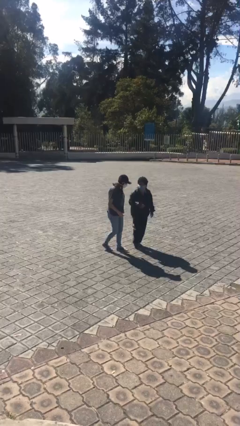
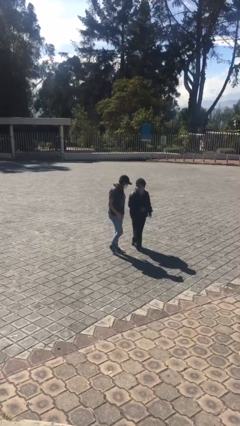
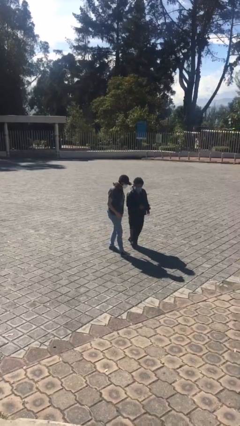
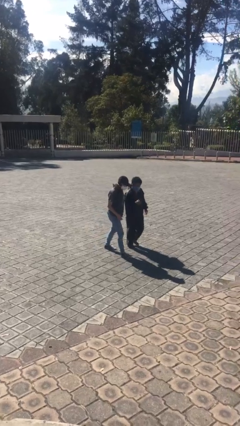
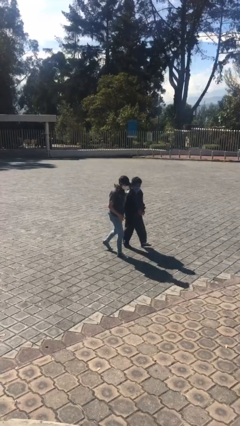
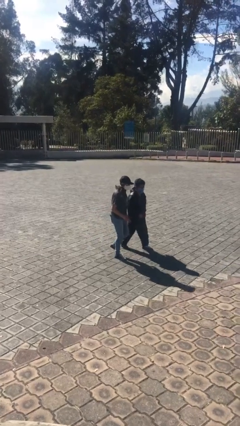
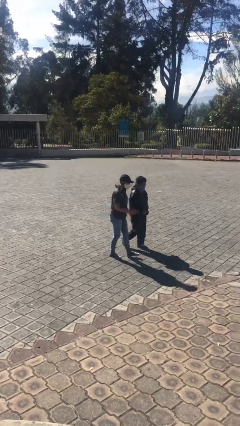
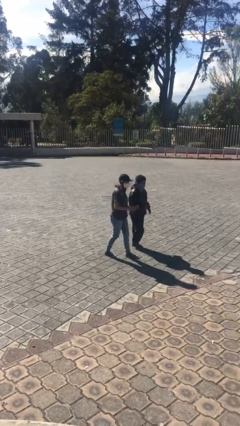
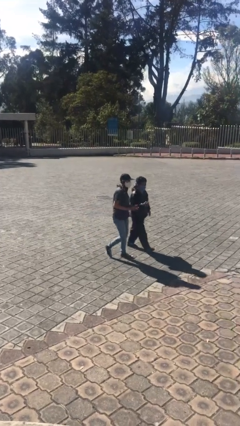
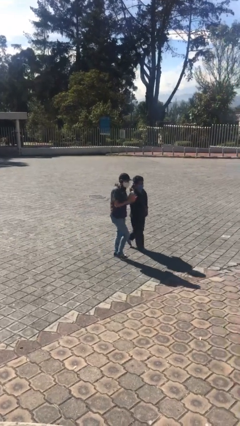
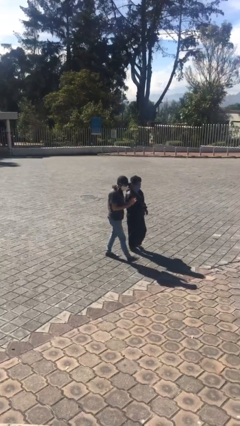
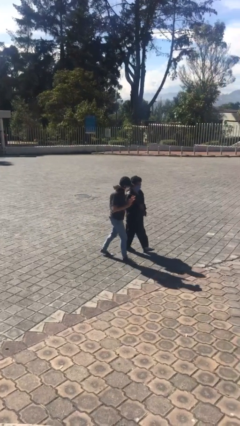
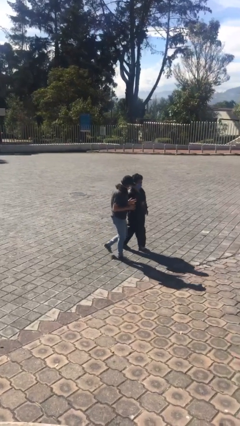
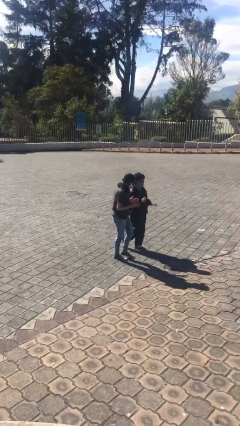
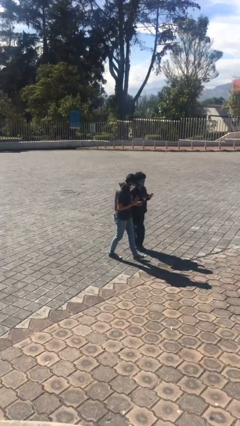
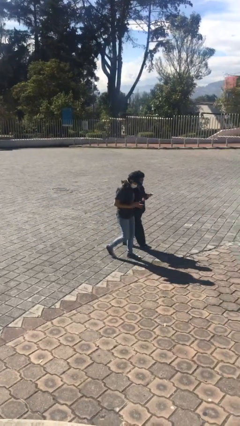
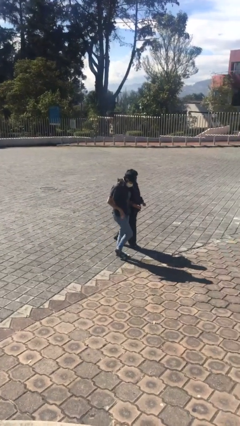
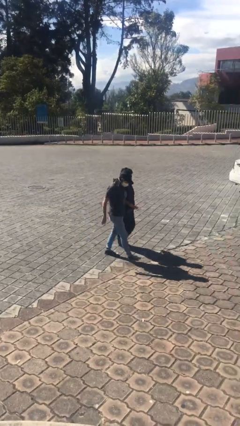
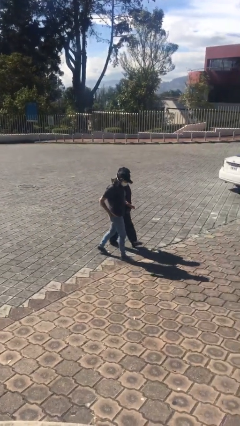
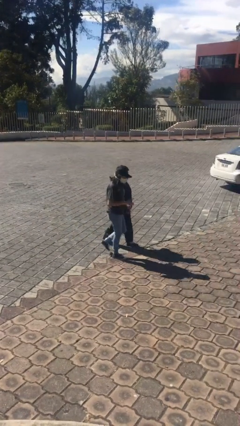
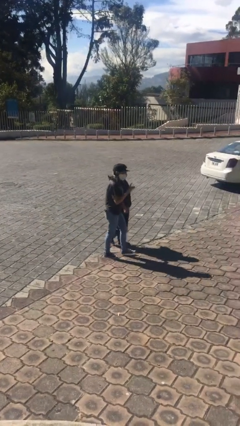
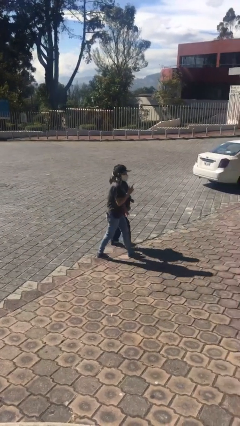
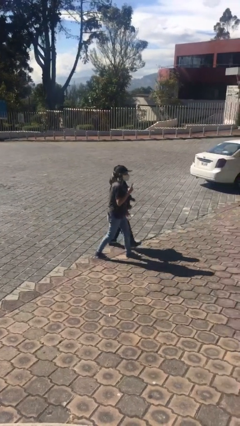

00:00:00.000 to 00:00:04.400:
person talks to person

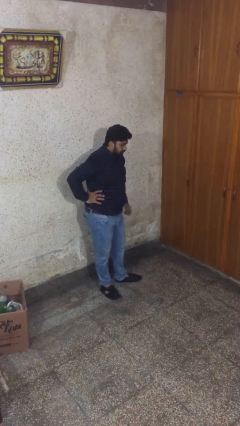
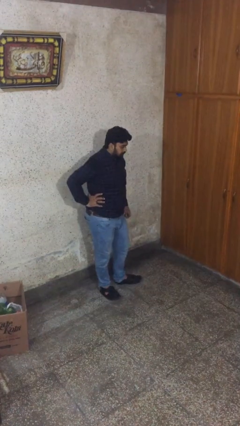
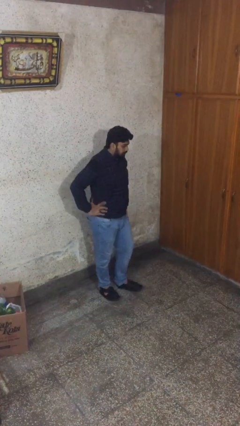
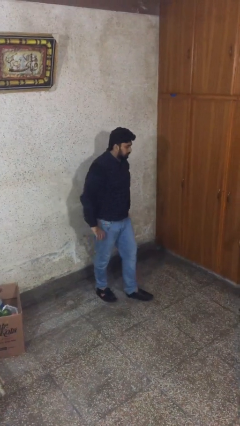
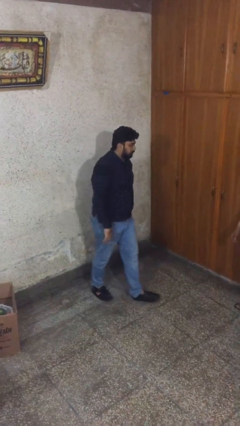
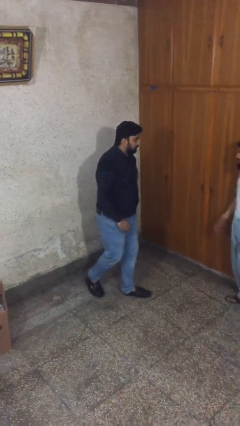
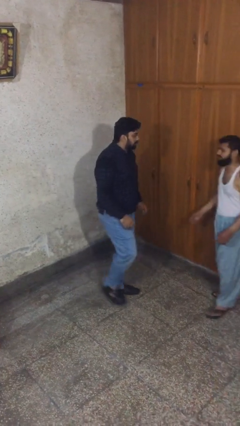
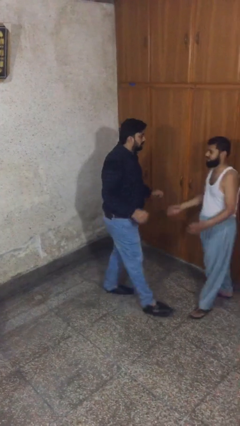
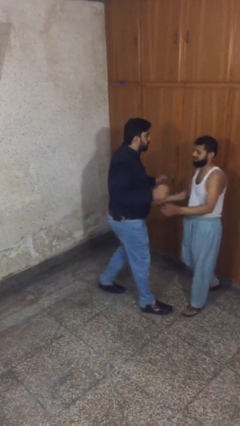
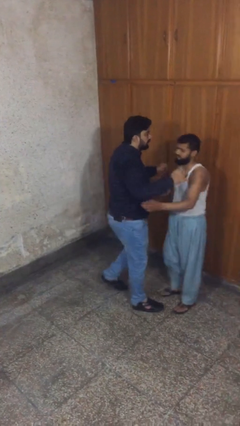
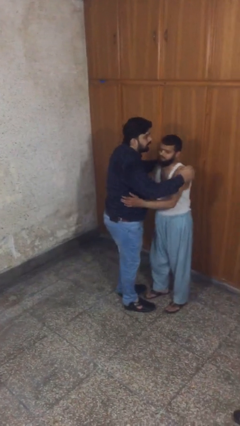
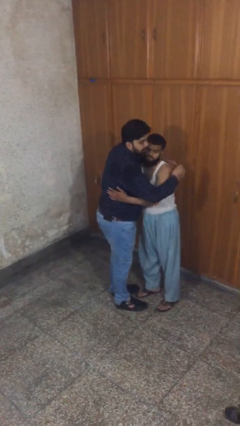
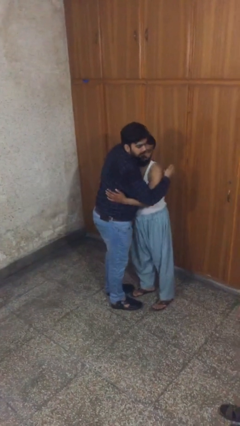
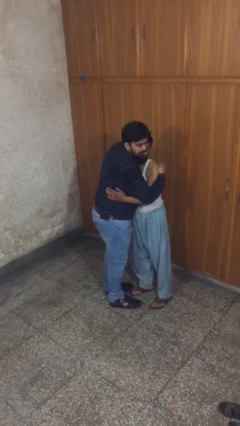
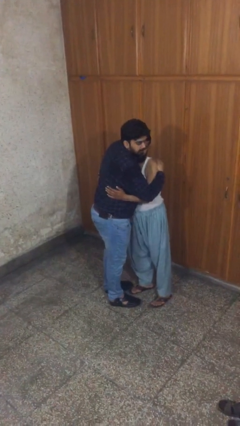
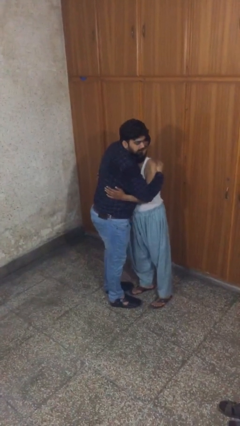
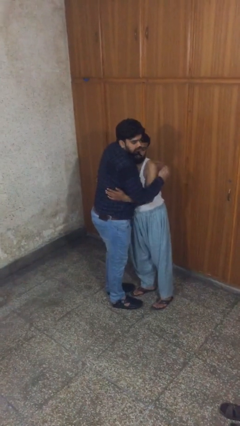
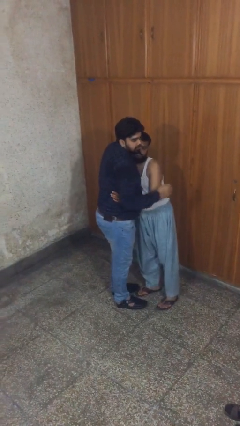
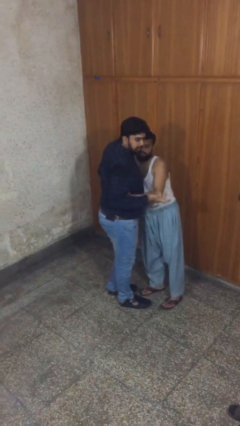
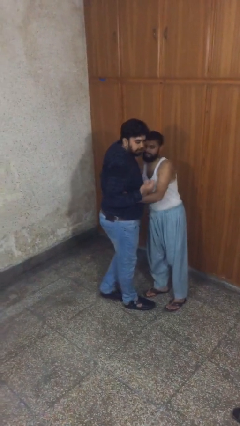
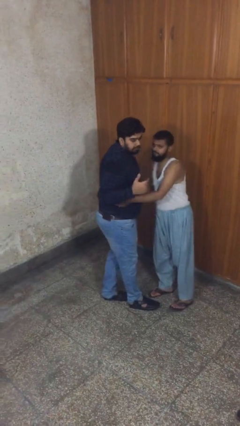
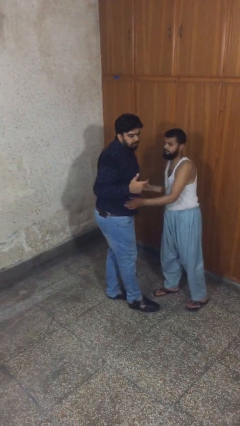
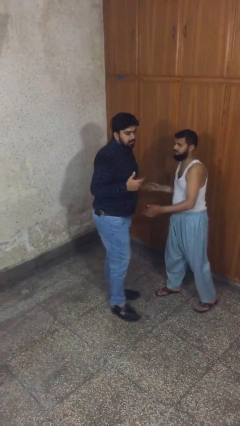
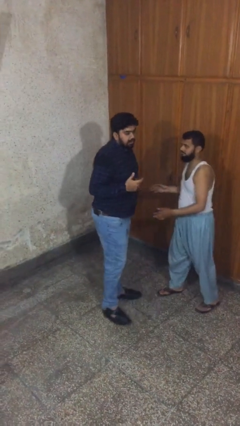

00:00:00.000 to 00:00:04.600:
person embraces person

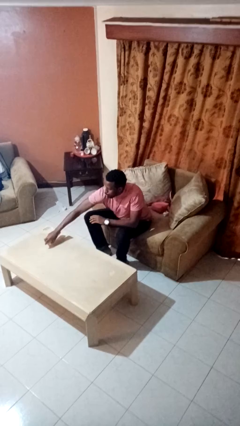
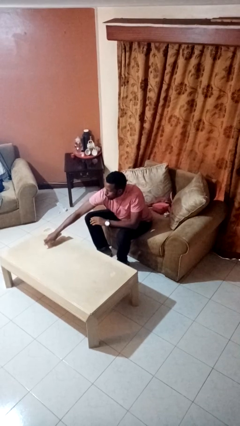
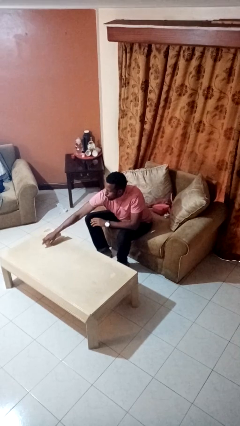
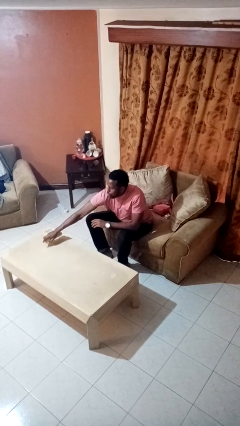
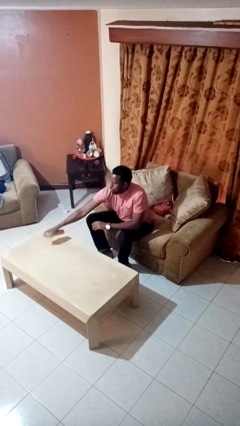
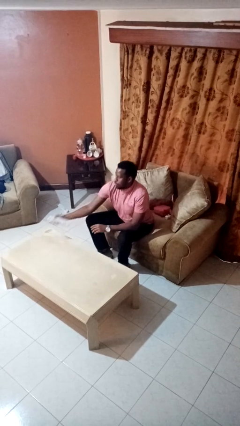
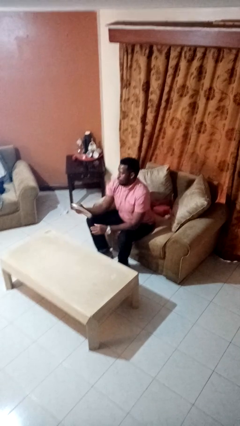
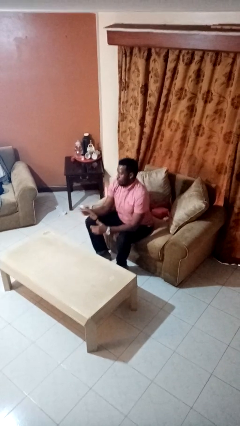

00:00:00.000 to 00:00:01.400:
person sprays from bottle

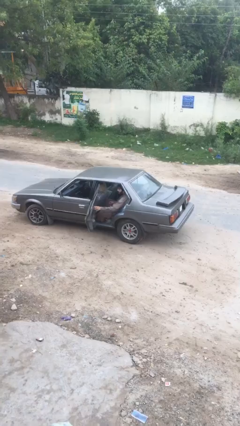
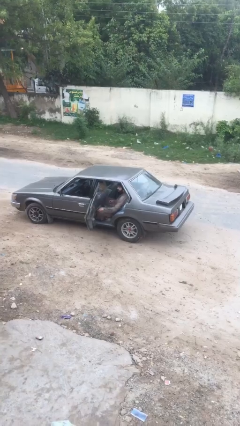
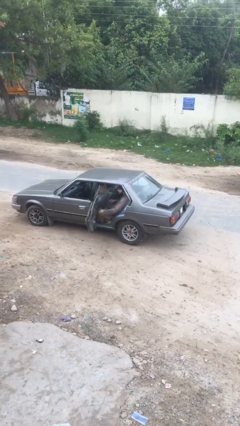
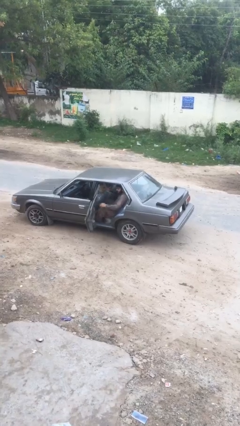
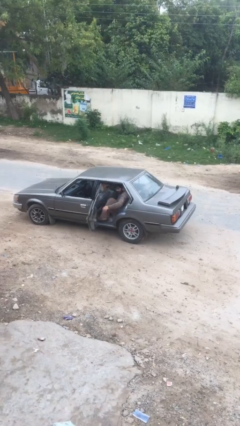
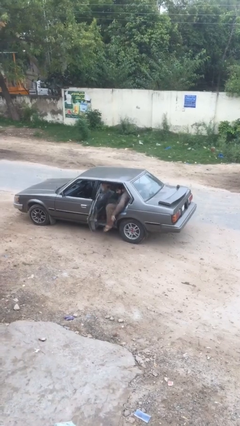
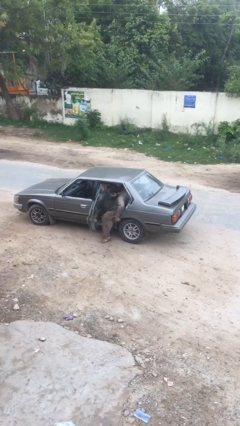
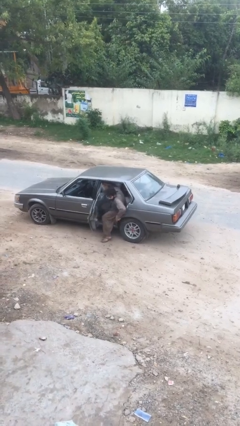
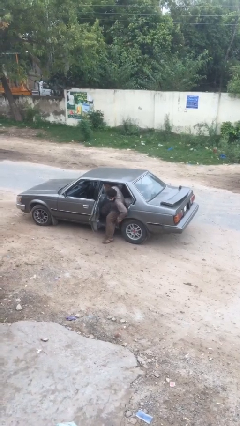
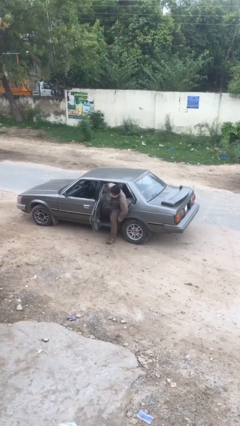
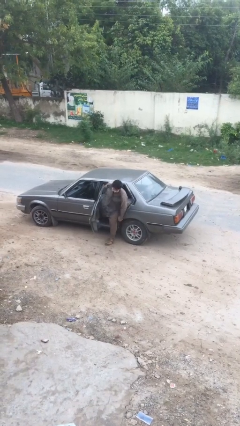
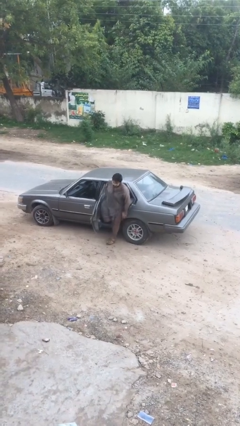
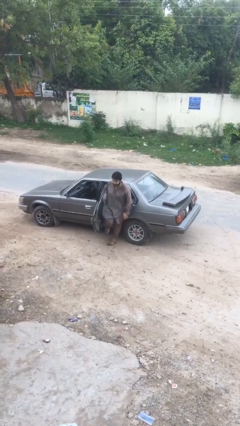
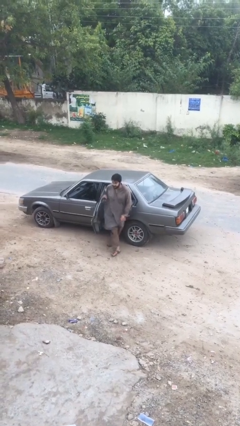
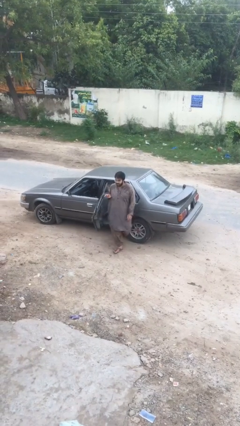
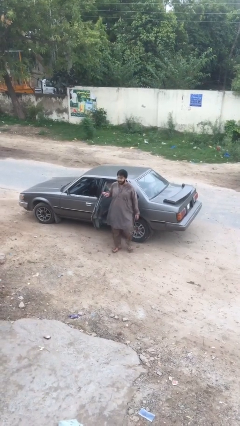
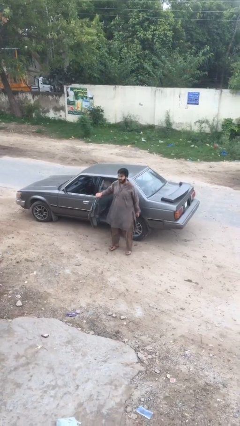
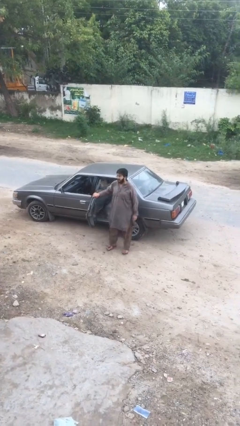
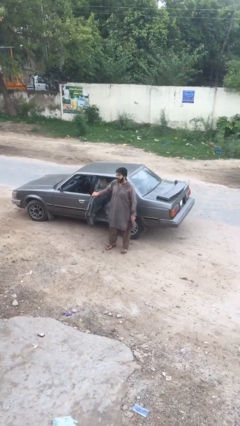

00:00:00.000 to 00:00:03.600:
person exits car

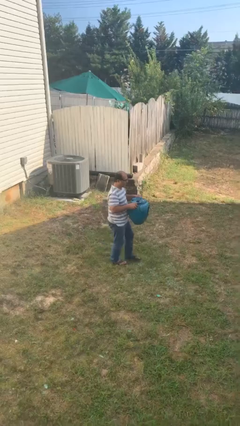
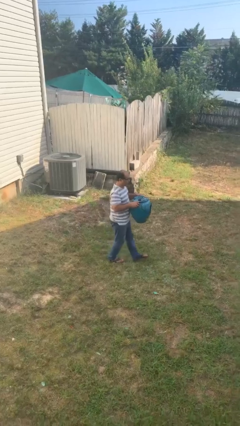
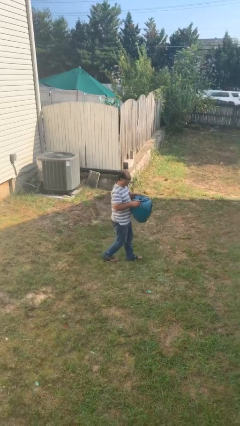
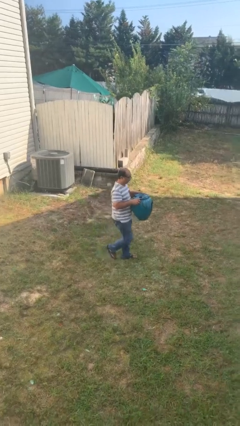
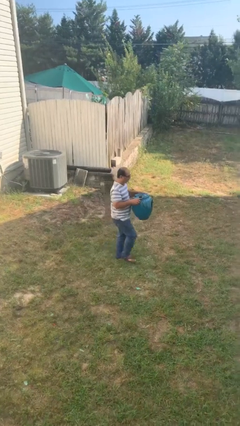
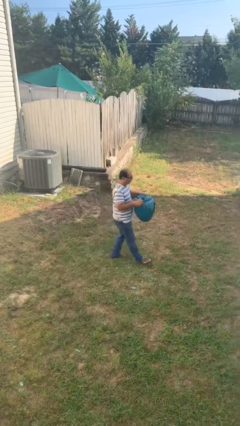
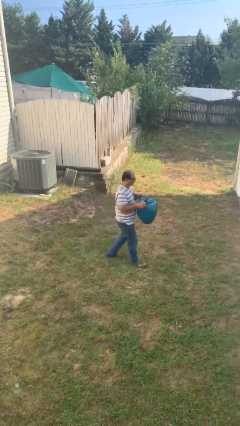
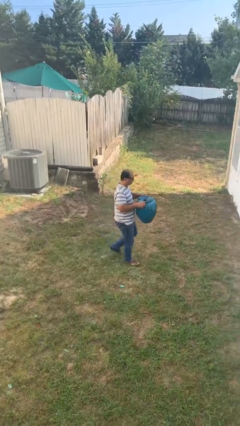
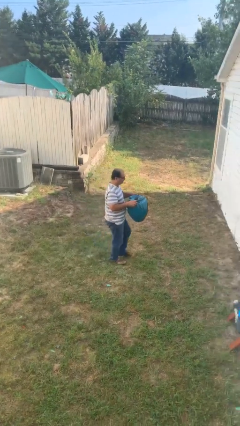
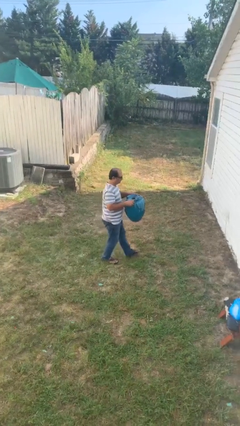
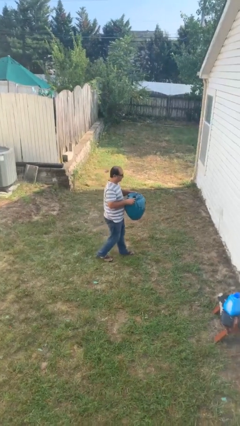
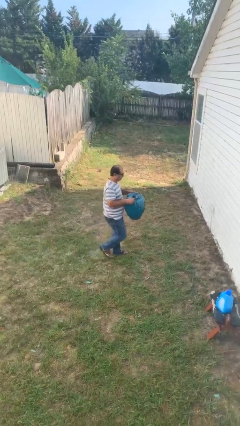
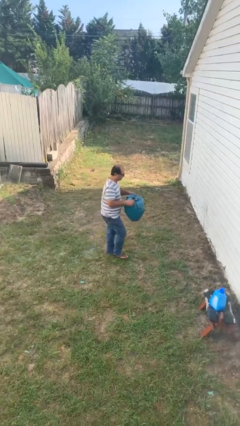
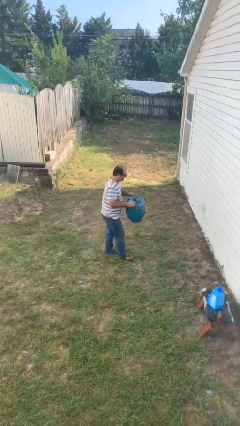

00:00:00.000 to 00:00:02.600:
person carries heavy object

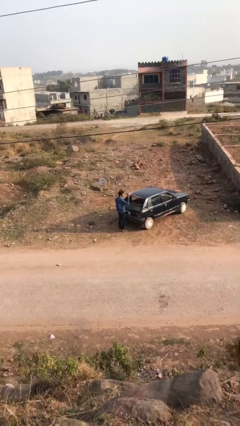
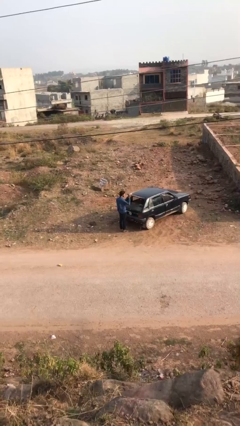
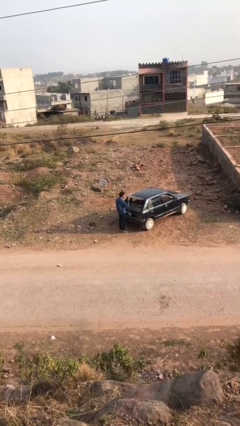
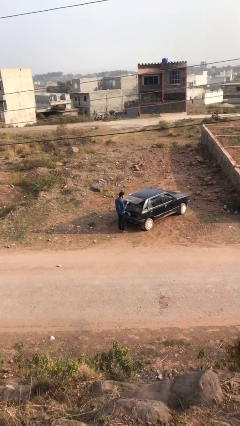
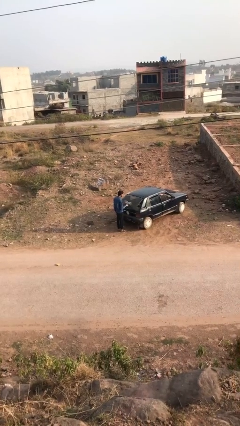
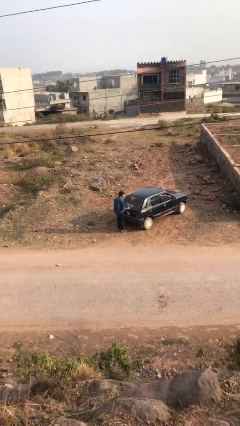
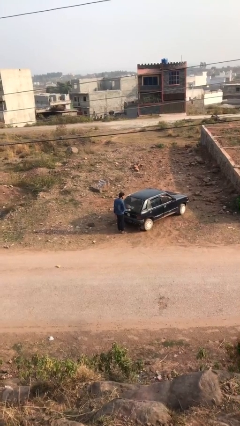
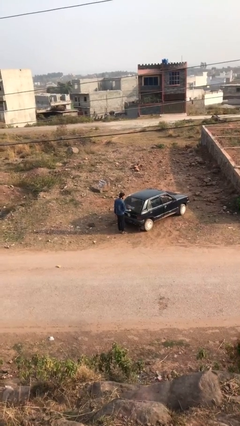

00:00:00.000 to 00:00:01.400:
person closes car trunk
